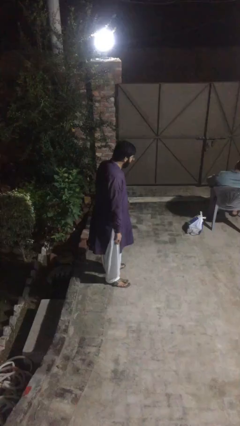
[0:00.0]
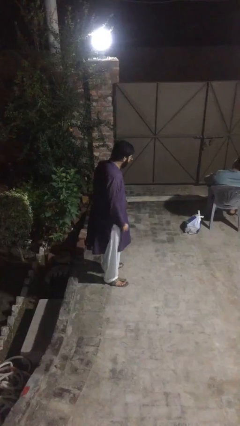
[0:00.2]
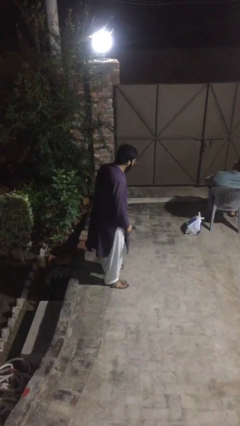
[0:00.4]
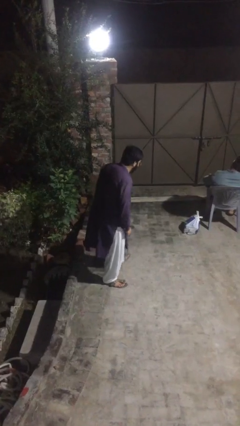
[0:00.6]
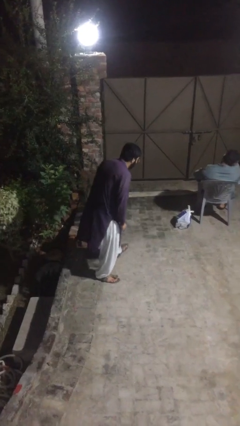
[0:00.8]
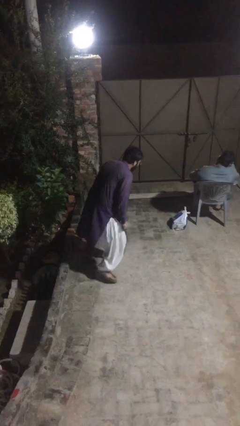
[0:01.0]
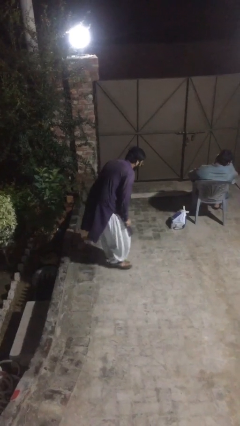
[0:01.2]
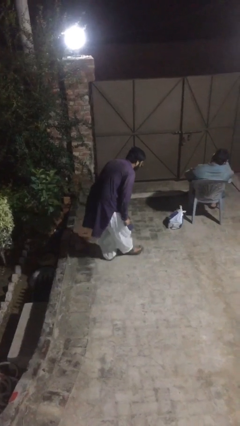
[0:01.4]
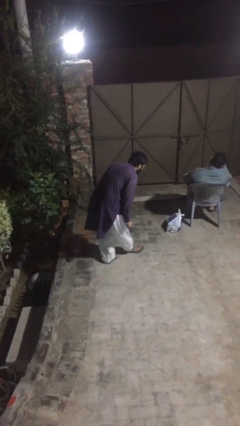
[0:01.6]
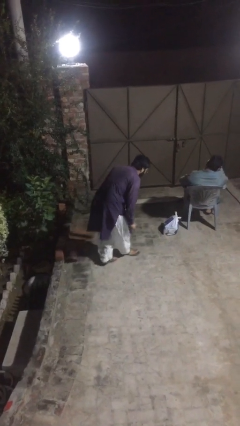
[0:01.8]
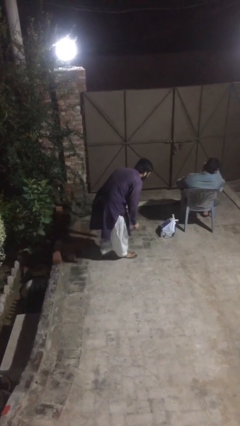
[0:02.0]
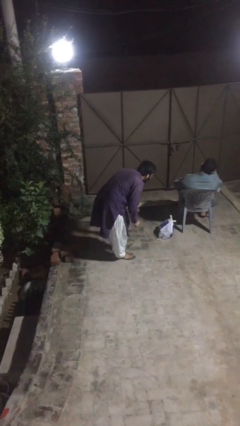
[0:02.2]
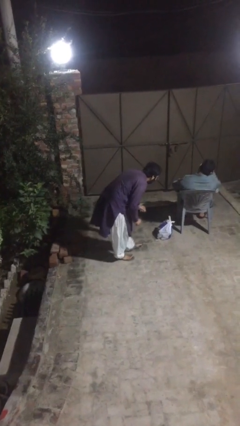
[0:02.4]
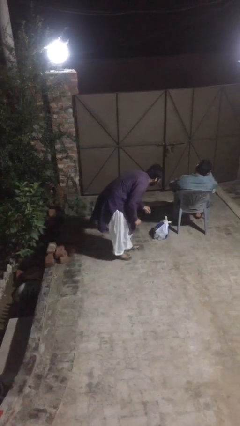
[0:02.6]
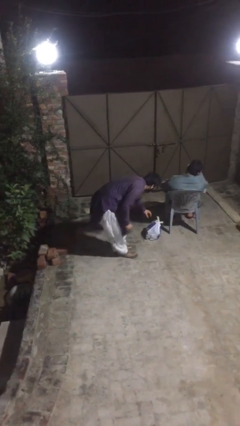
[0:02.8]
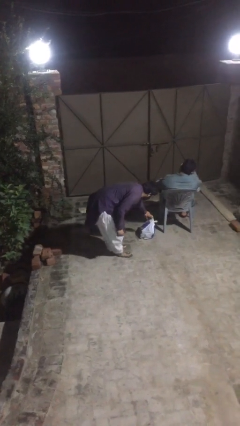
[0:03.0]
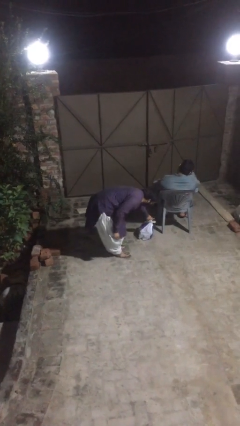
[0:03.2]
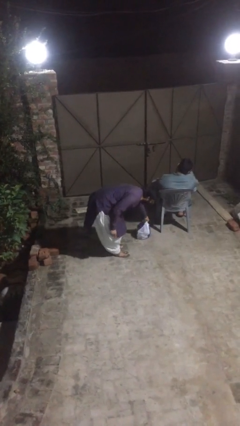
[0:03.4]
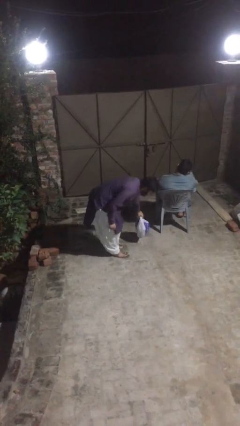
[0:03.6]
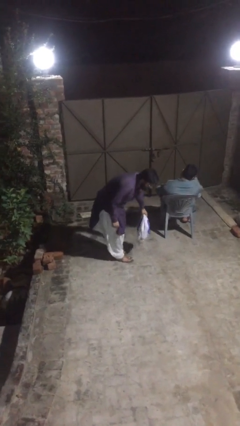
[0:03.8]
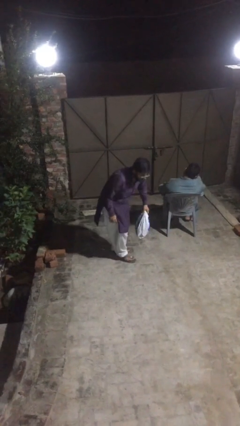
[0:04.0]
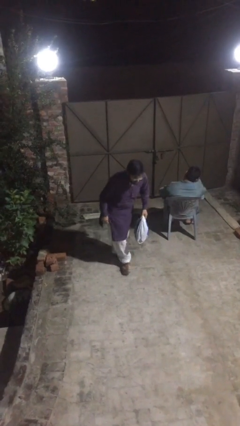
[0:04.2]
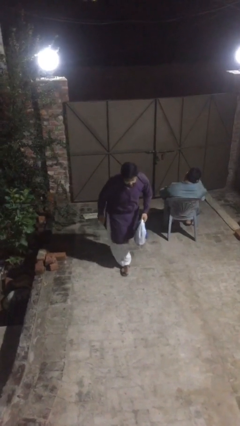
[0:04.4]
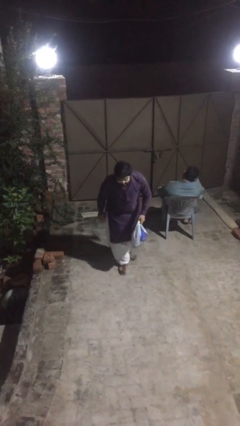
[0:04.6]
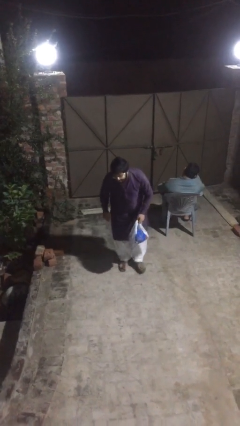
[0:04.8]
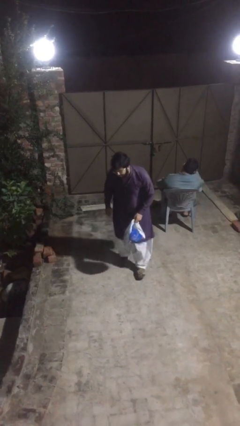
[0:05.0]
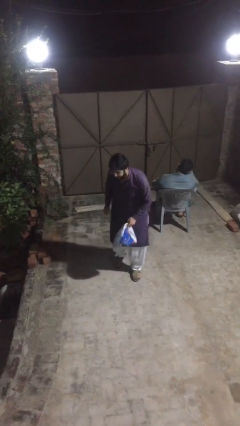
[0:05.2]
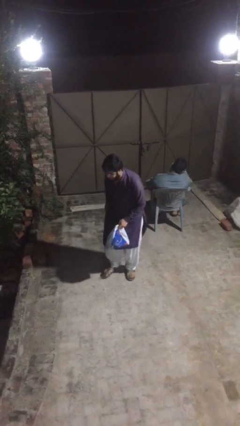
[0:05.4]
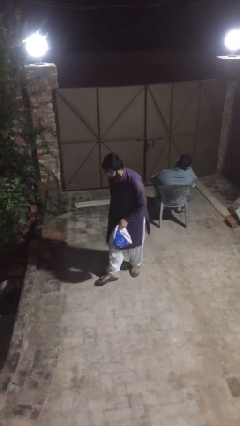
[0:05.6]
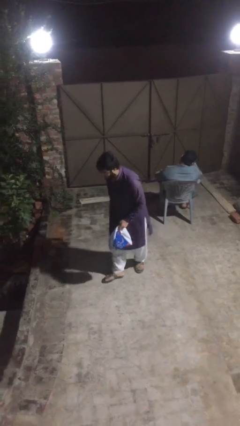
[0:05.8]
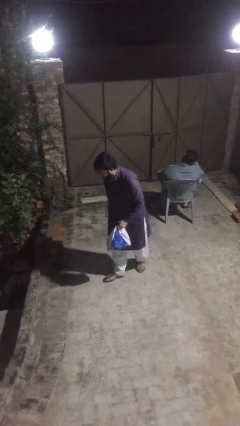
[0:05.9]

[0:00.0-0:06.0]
person steals object from person

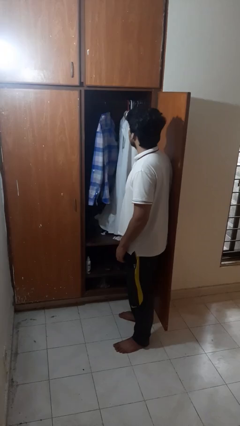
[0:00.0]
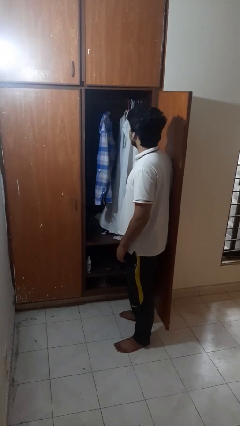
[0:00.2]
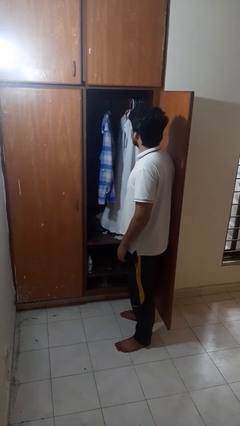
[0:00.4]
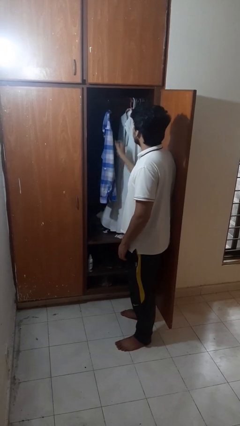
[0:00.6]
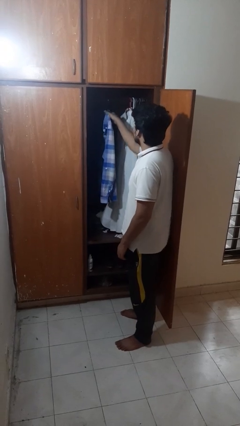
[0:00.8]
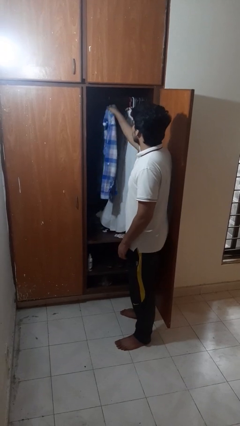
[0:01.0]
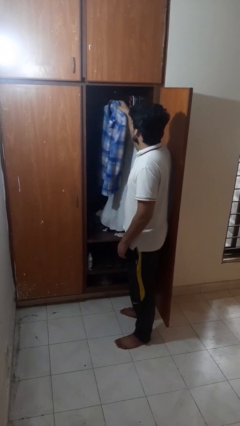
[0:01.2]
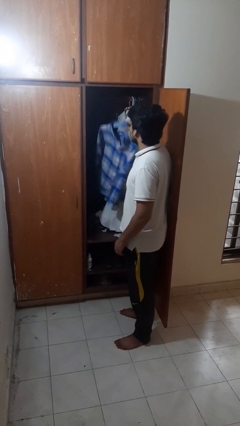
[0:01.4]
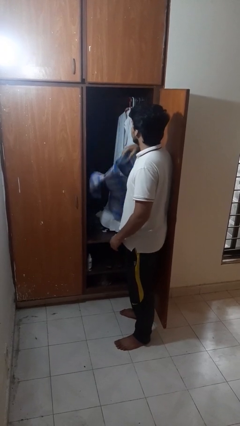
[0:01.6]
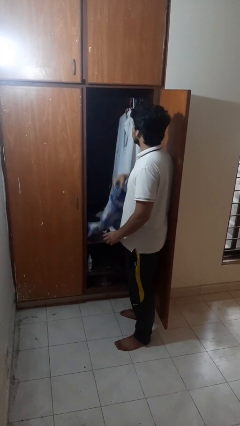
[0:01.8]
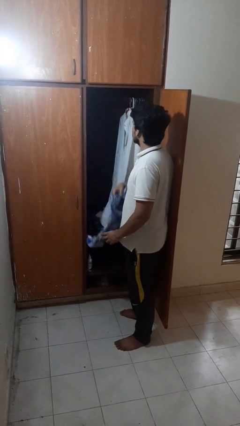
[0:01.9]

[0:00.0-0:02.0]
person takes clothes from closet

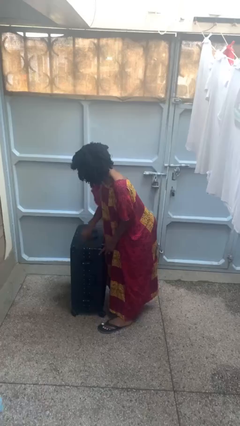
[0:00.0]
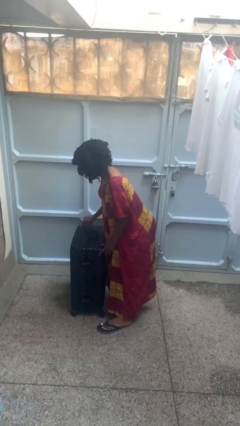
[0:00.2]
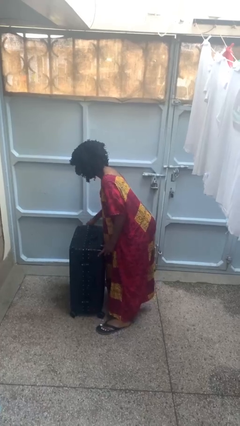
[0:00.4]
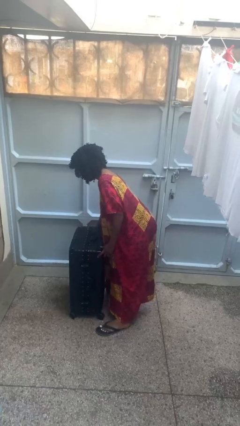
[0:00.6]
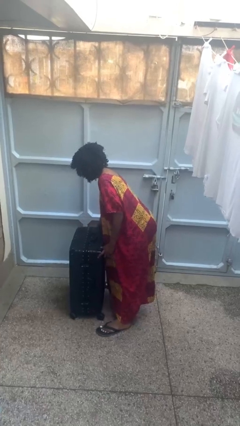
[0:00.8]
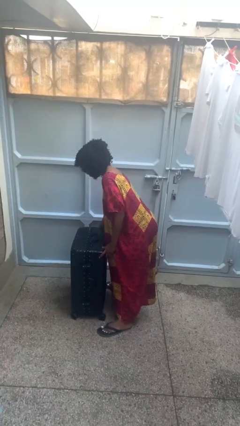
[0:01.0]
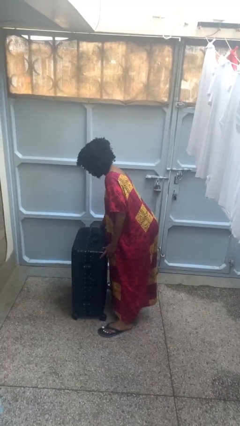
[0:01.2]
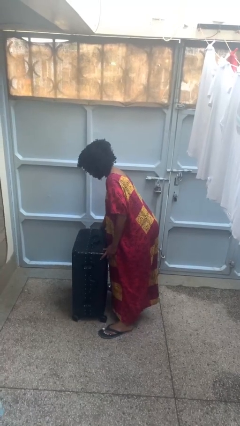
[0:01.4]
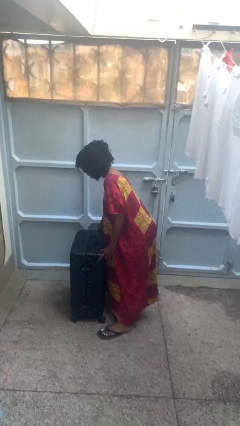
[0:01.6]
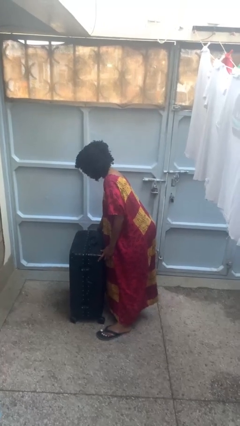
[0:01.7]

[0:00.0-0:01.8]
person closes suitcase

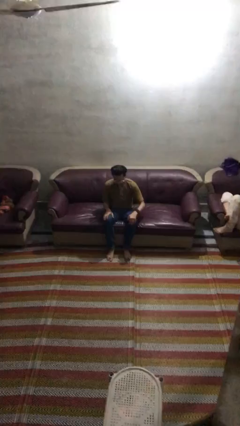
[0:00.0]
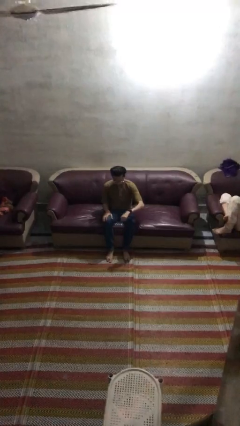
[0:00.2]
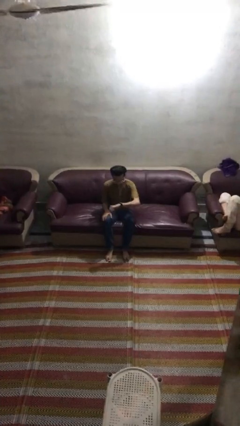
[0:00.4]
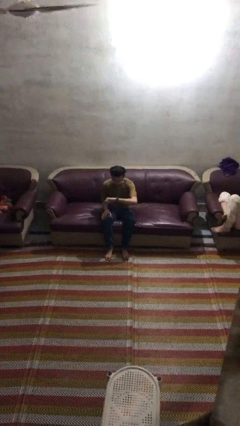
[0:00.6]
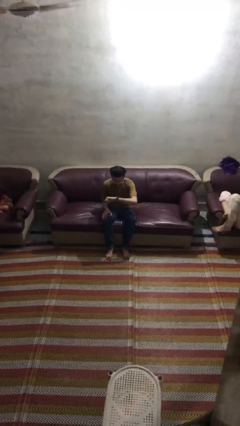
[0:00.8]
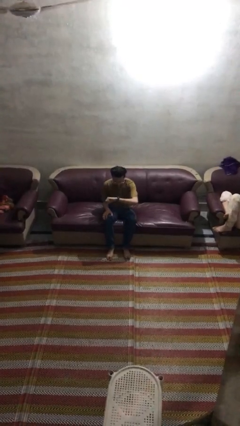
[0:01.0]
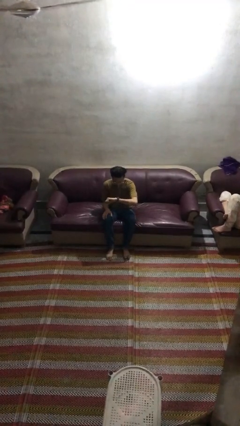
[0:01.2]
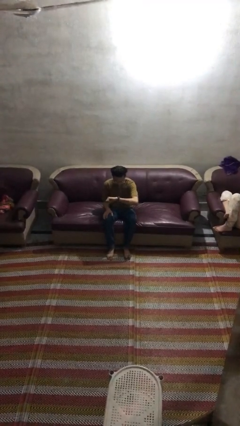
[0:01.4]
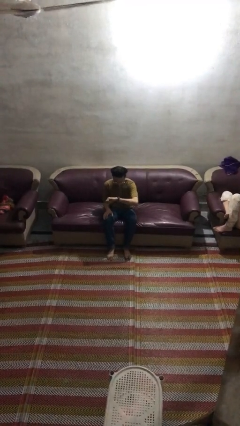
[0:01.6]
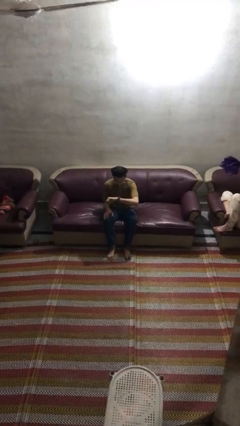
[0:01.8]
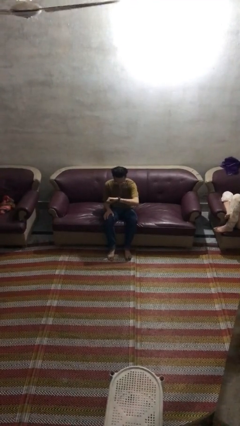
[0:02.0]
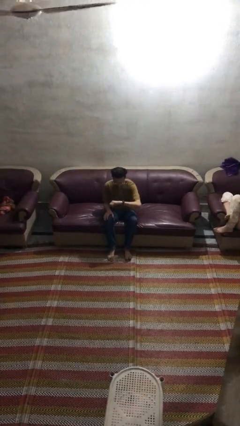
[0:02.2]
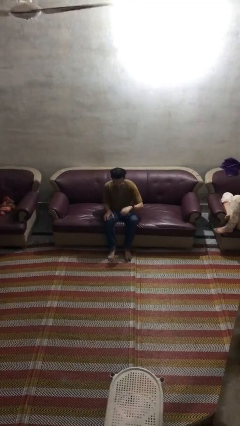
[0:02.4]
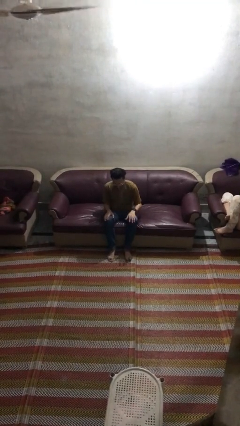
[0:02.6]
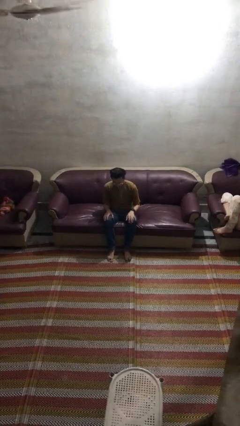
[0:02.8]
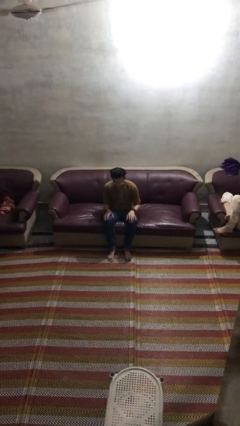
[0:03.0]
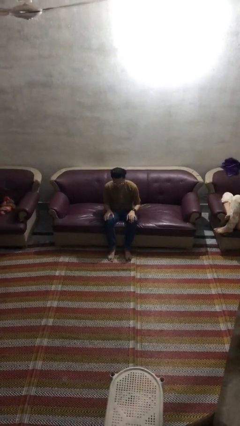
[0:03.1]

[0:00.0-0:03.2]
person looks at wristwatch

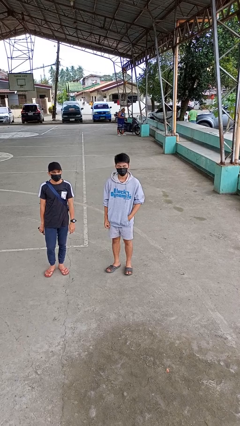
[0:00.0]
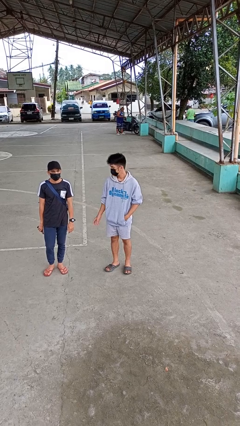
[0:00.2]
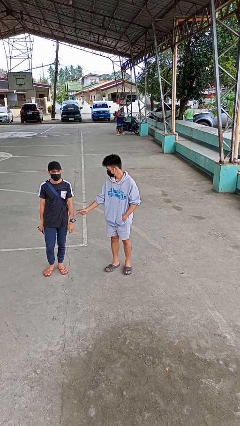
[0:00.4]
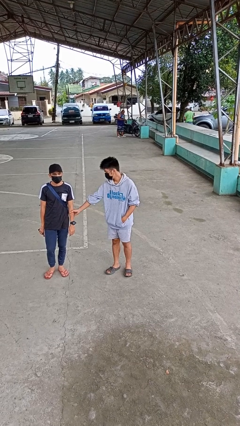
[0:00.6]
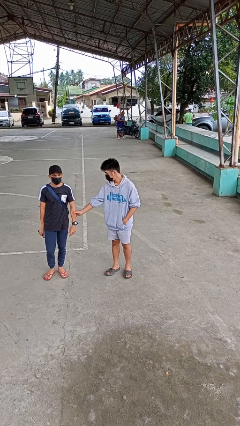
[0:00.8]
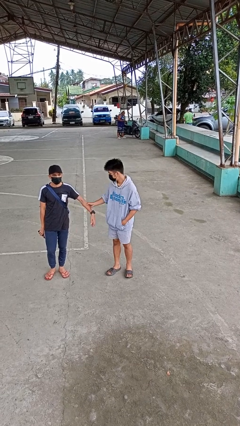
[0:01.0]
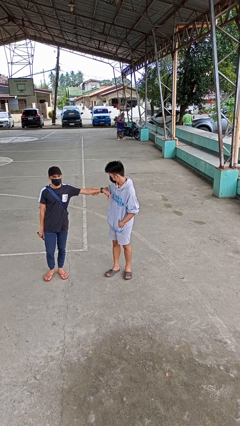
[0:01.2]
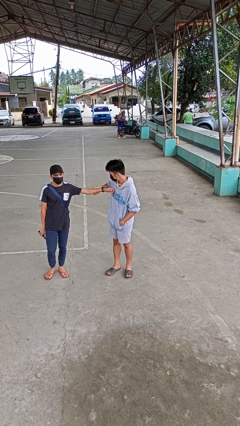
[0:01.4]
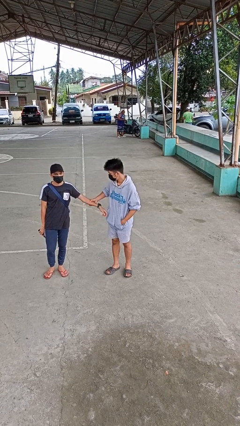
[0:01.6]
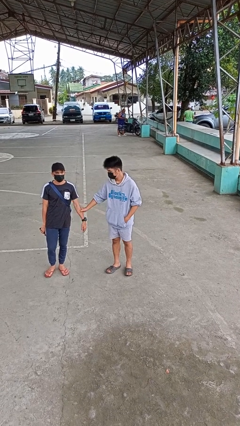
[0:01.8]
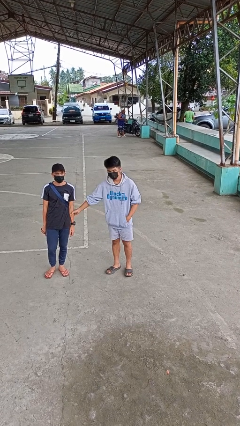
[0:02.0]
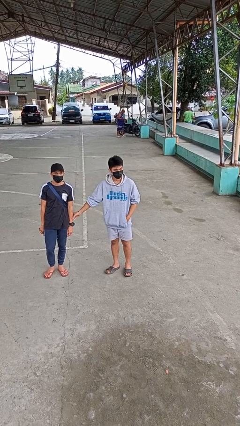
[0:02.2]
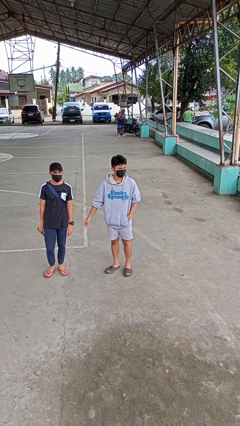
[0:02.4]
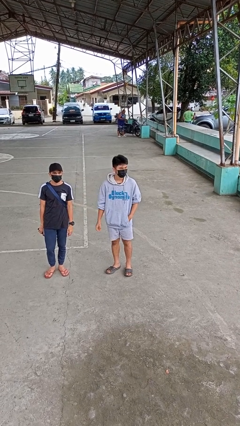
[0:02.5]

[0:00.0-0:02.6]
person grabs person by forearm

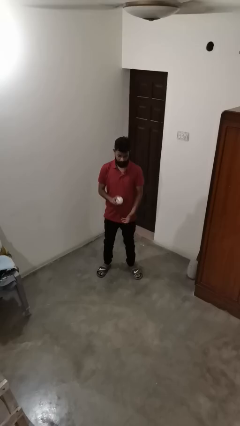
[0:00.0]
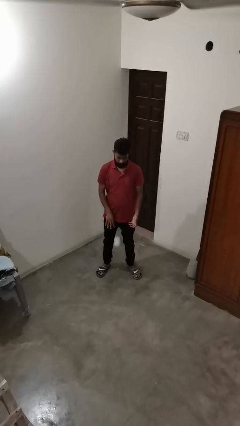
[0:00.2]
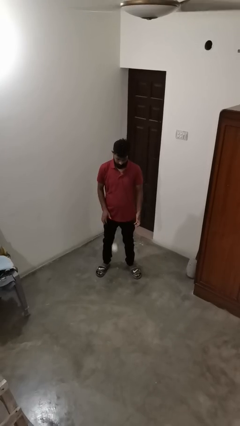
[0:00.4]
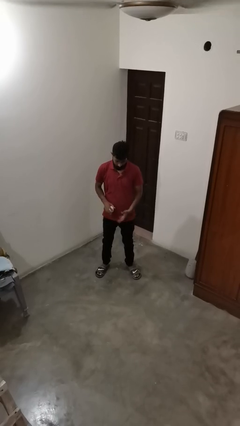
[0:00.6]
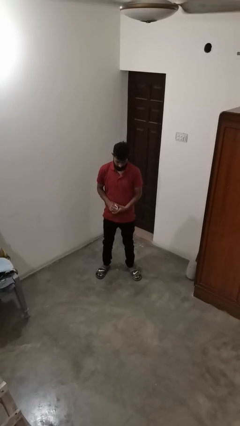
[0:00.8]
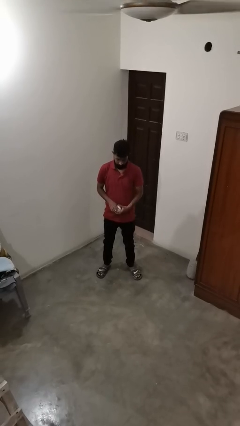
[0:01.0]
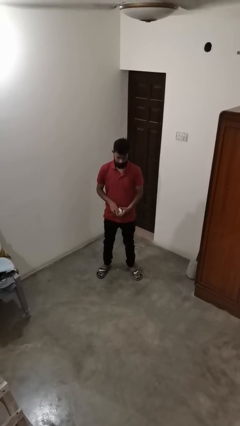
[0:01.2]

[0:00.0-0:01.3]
person bounces ball on floor

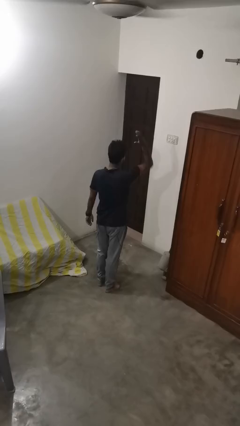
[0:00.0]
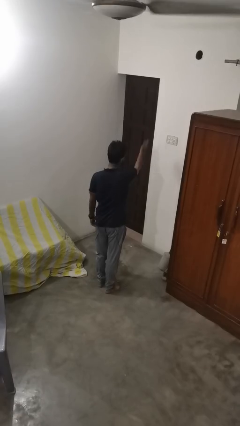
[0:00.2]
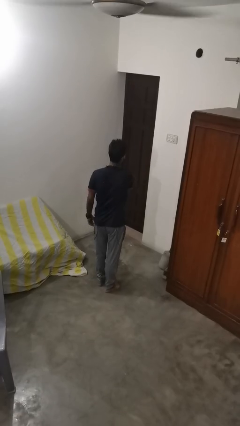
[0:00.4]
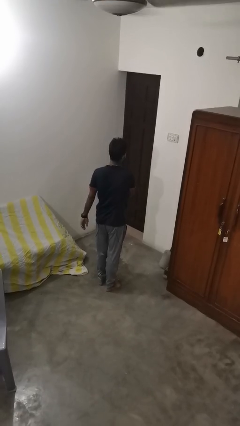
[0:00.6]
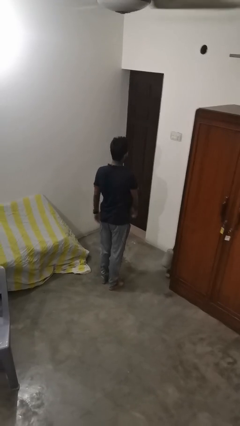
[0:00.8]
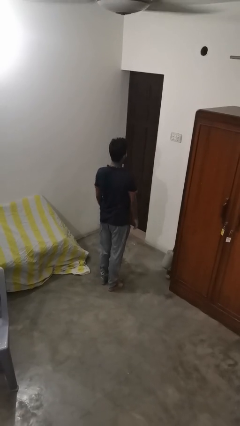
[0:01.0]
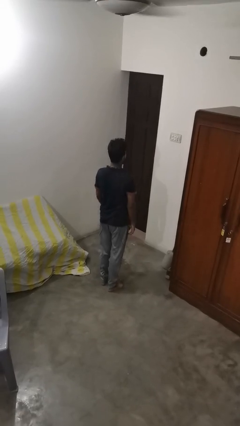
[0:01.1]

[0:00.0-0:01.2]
person karate chop
